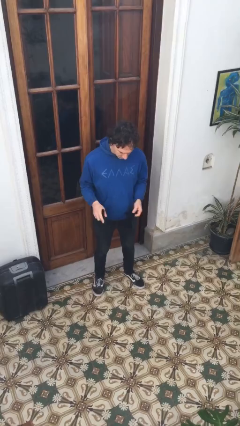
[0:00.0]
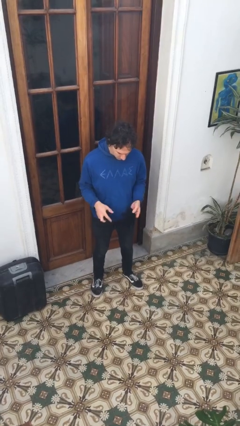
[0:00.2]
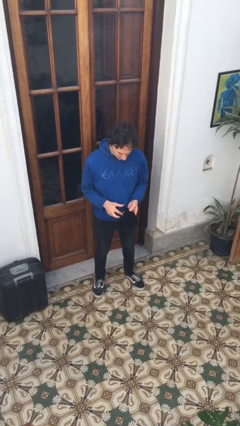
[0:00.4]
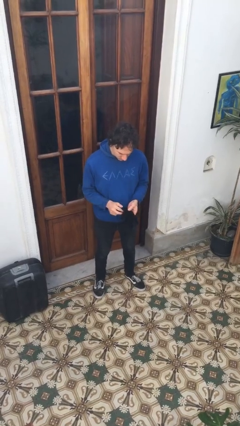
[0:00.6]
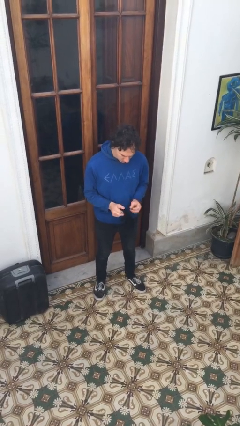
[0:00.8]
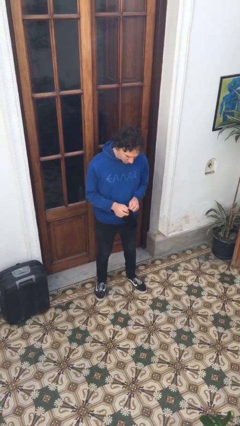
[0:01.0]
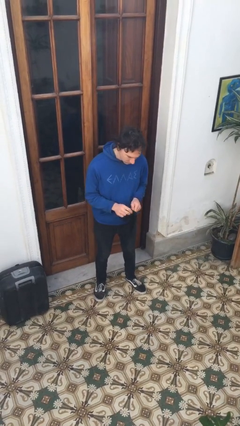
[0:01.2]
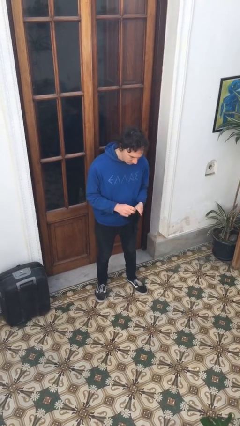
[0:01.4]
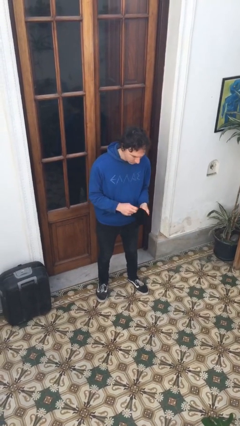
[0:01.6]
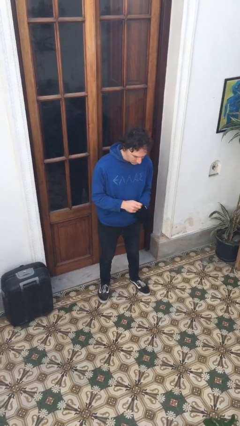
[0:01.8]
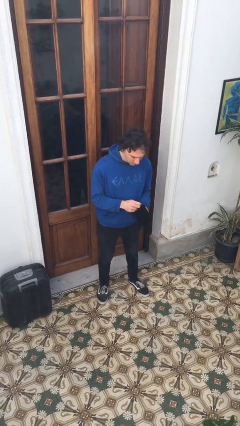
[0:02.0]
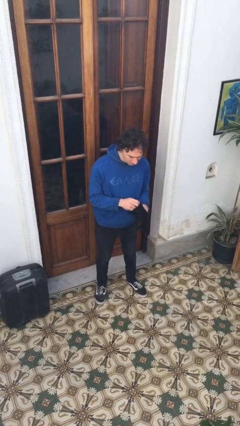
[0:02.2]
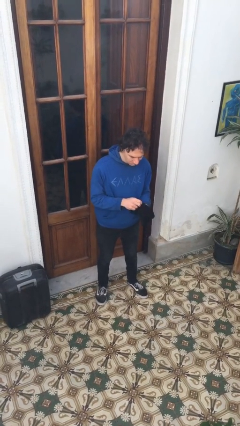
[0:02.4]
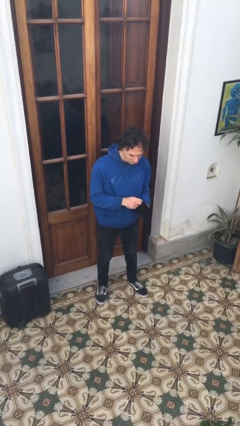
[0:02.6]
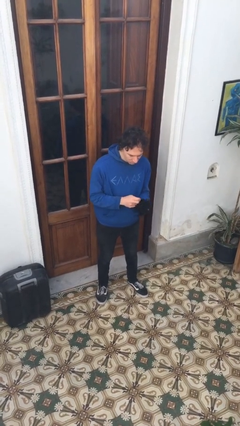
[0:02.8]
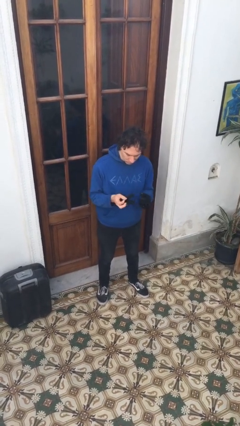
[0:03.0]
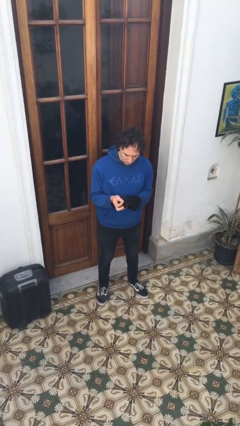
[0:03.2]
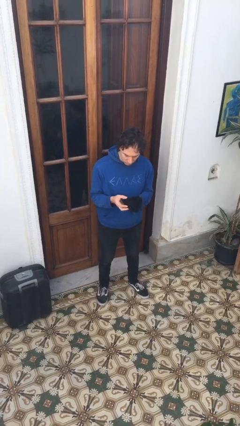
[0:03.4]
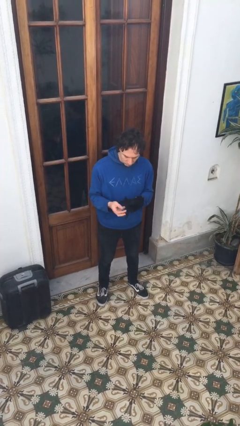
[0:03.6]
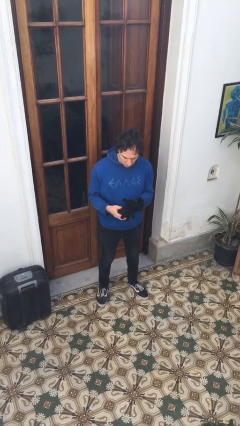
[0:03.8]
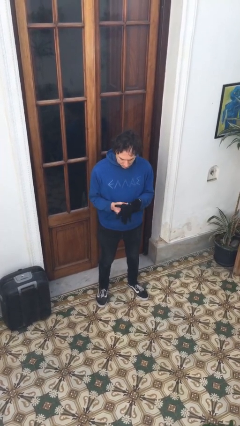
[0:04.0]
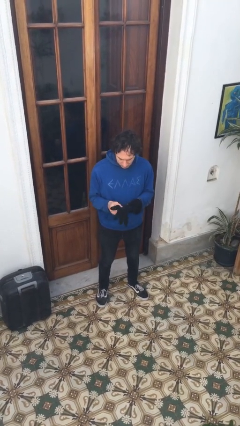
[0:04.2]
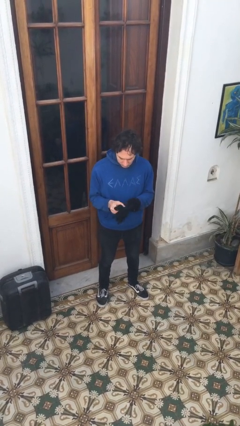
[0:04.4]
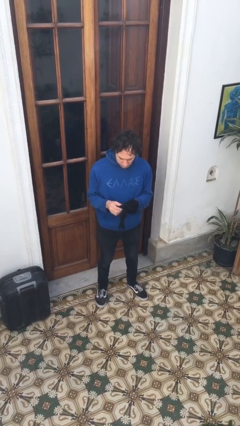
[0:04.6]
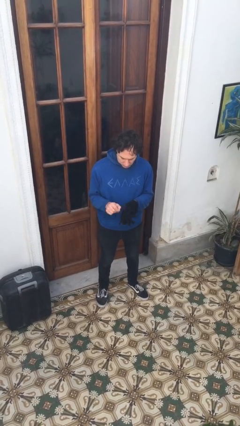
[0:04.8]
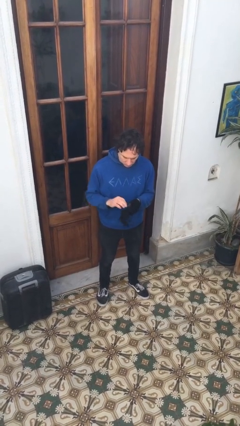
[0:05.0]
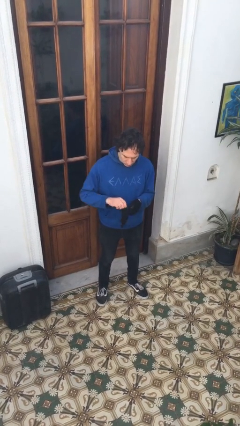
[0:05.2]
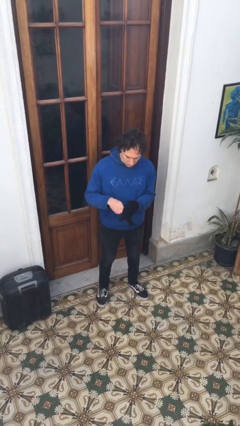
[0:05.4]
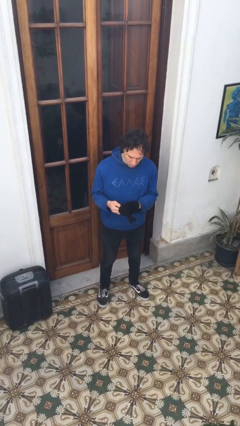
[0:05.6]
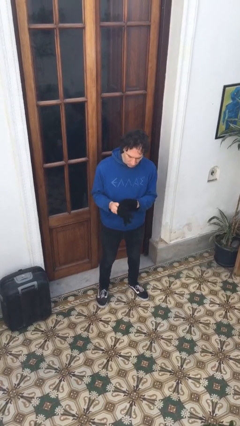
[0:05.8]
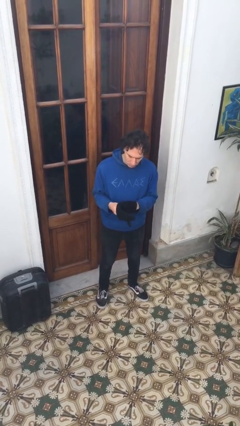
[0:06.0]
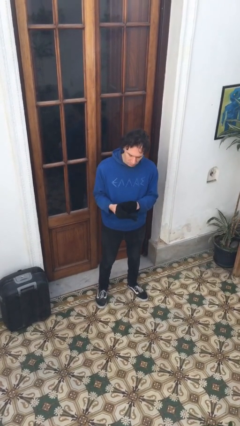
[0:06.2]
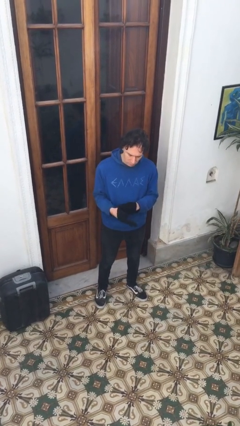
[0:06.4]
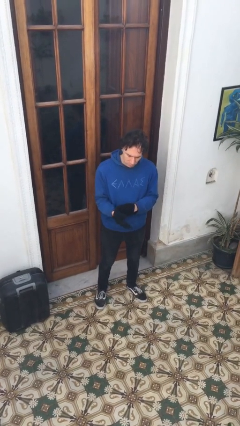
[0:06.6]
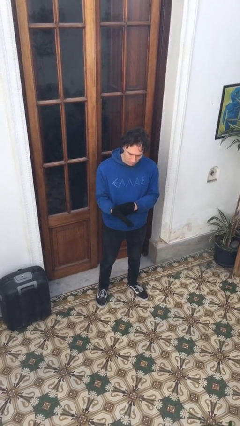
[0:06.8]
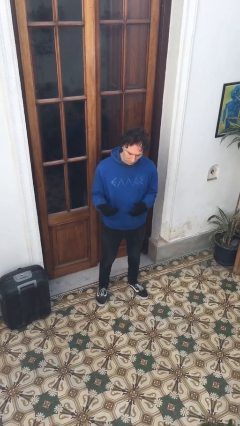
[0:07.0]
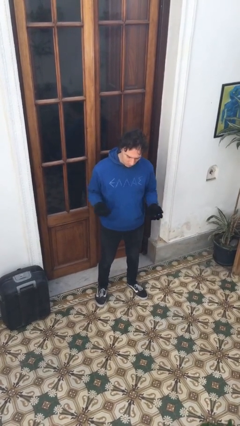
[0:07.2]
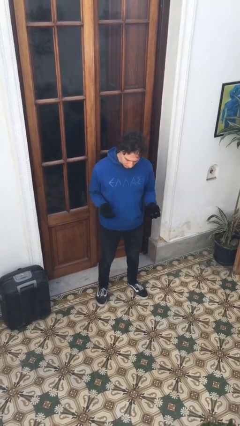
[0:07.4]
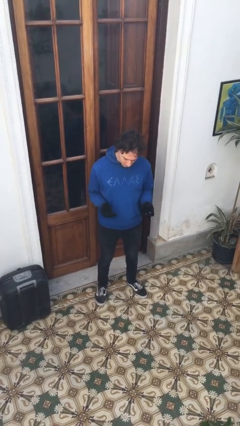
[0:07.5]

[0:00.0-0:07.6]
person puts on gloves

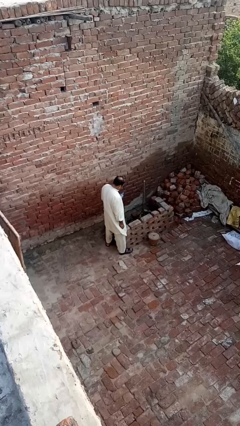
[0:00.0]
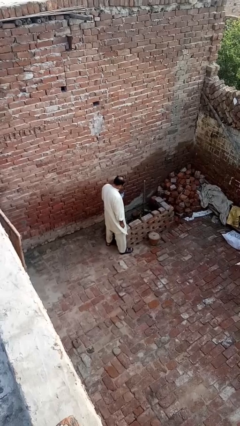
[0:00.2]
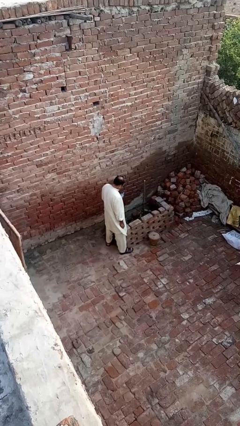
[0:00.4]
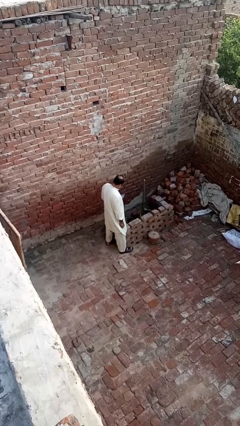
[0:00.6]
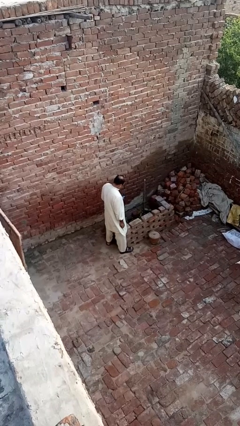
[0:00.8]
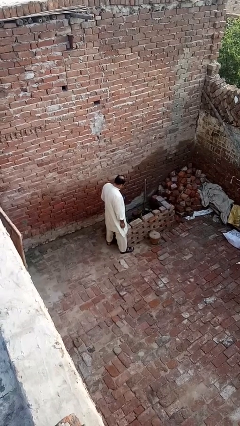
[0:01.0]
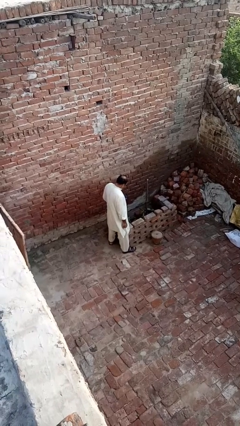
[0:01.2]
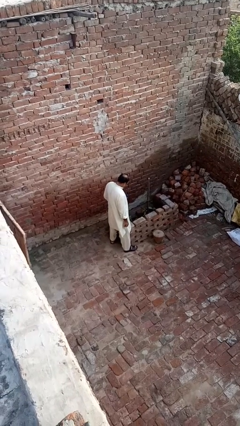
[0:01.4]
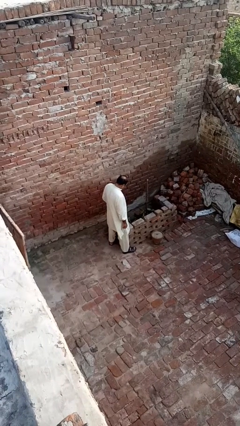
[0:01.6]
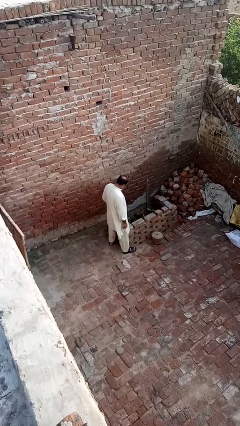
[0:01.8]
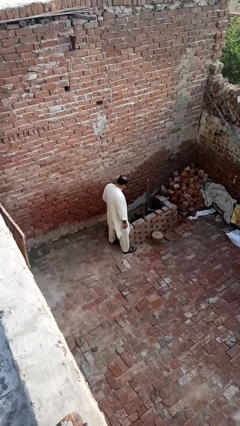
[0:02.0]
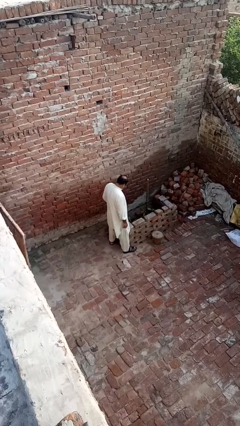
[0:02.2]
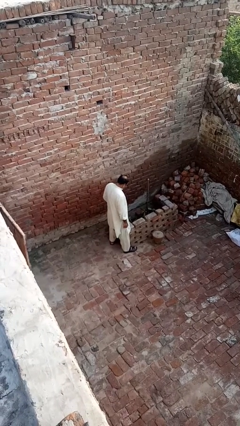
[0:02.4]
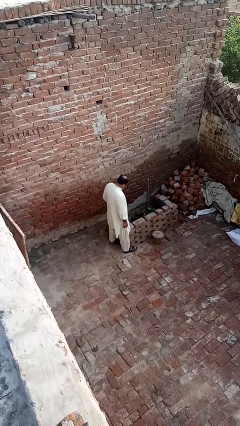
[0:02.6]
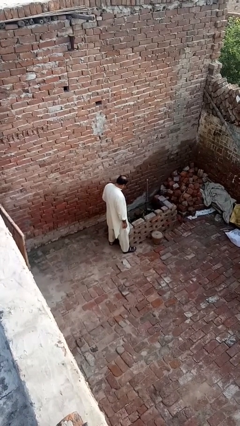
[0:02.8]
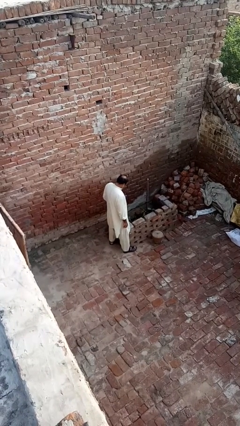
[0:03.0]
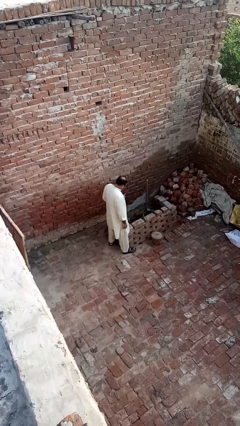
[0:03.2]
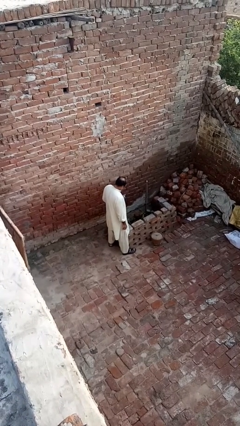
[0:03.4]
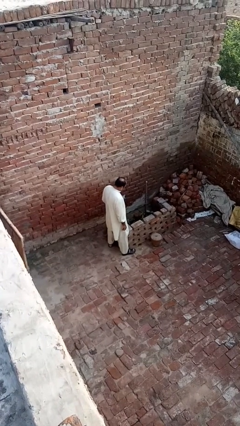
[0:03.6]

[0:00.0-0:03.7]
person waters houseplant

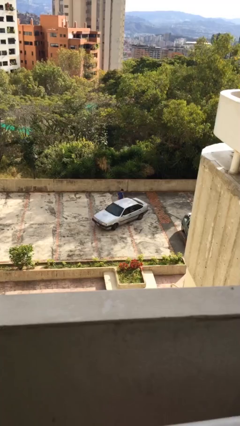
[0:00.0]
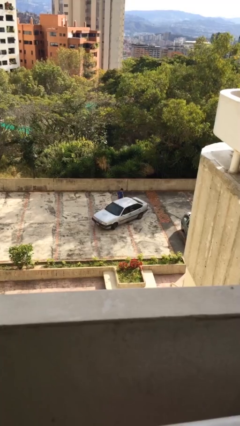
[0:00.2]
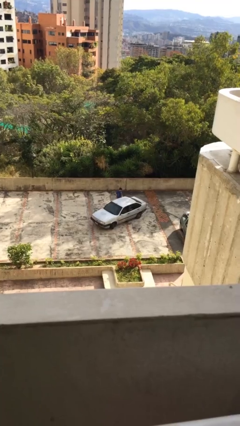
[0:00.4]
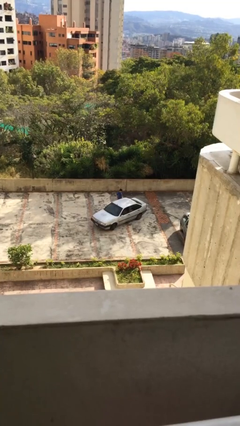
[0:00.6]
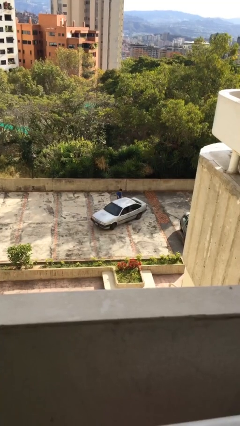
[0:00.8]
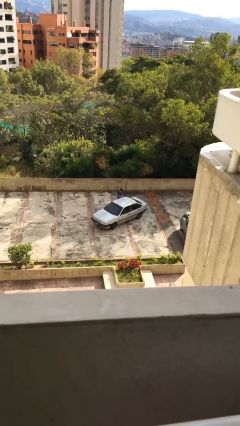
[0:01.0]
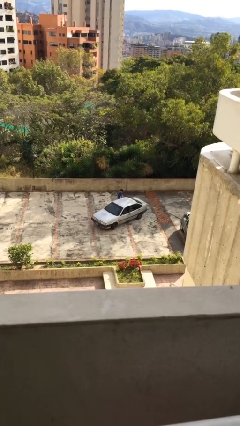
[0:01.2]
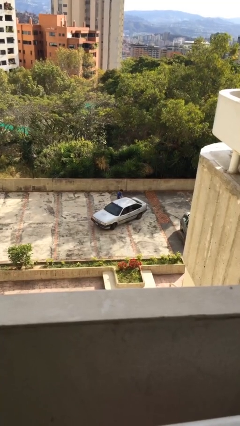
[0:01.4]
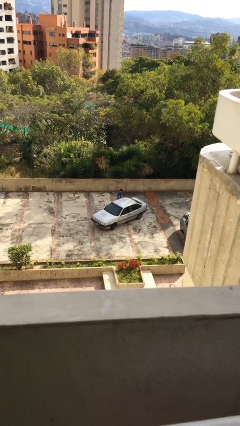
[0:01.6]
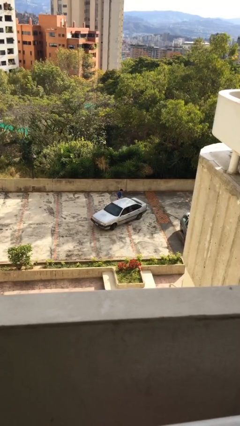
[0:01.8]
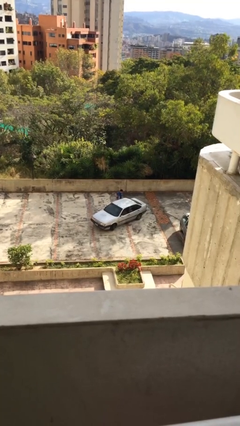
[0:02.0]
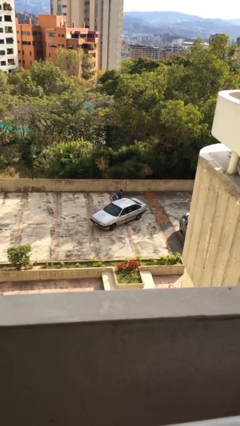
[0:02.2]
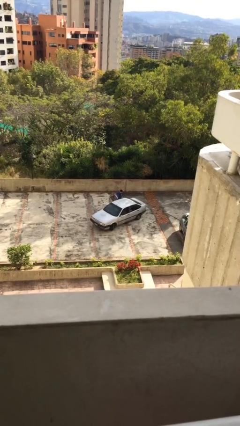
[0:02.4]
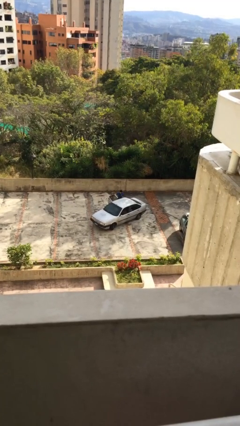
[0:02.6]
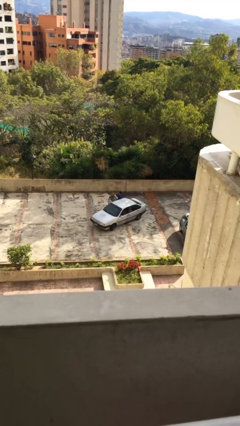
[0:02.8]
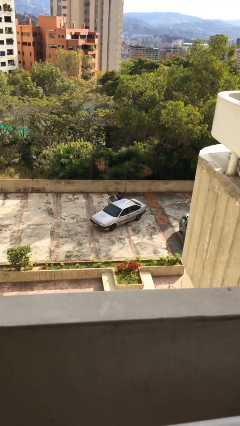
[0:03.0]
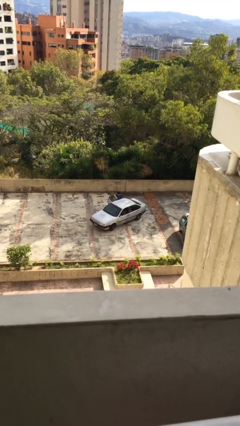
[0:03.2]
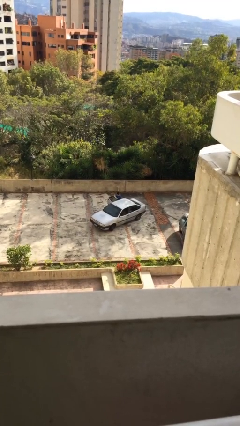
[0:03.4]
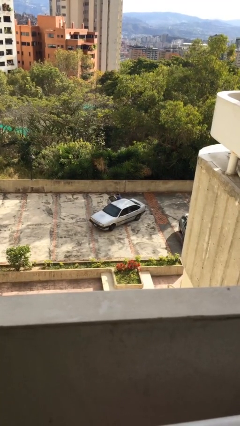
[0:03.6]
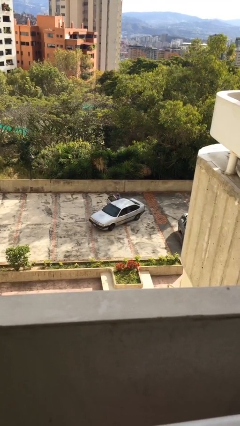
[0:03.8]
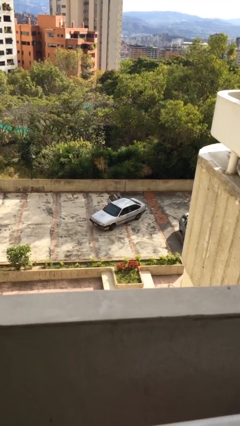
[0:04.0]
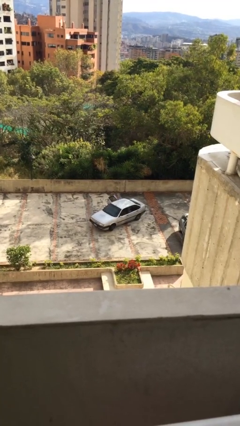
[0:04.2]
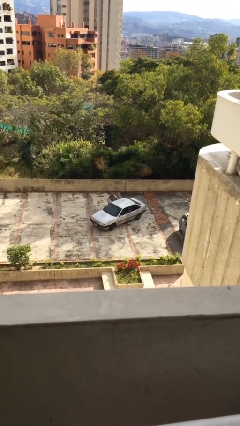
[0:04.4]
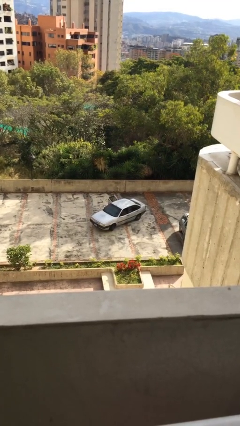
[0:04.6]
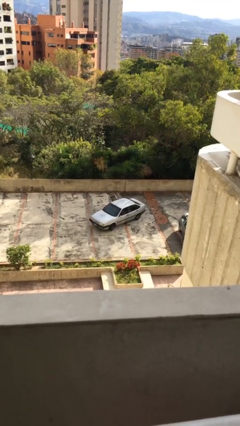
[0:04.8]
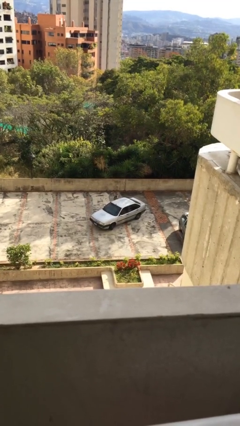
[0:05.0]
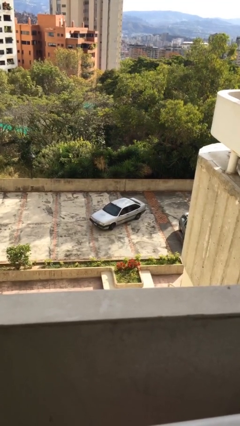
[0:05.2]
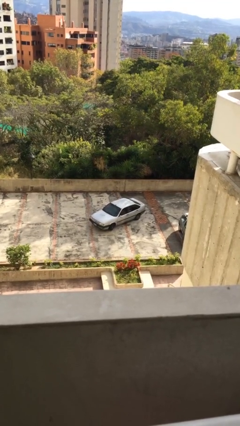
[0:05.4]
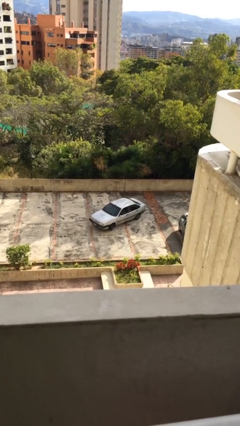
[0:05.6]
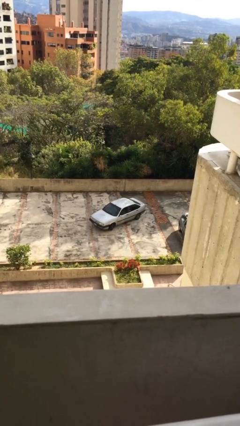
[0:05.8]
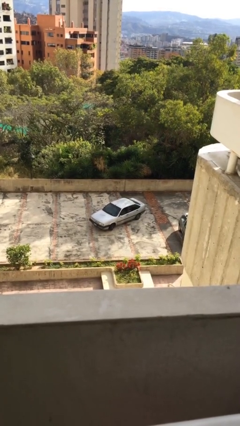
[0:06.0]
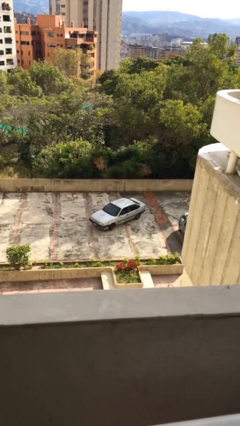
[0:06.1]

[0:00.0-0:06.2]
car picks up person

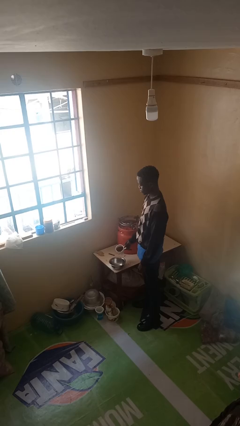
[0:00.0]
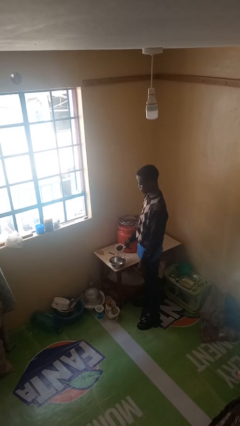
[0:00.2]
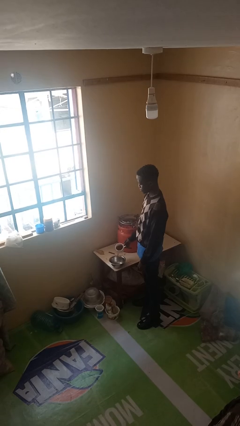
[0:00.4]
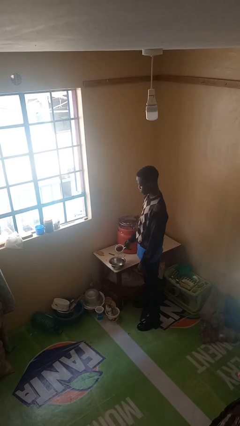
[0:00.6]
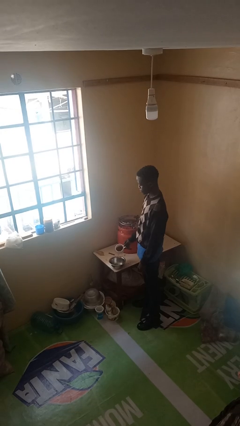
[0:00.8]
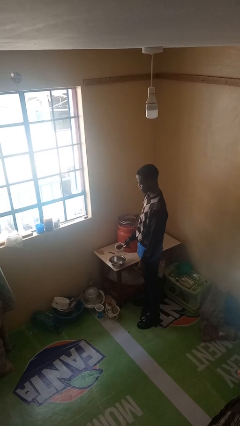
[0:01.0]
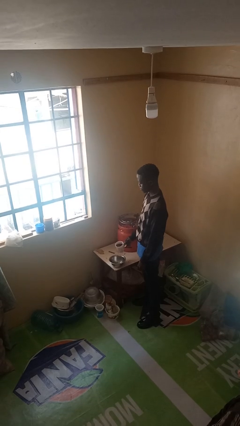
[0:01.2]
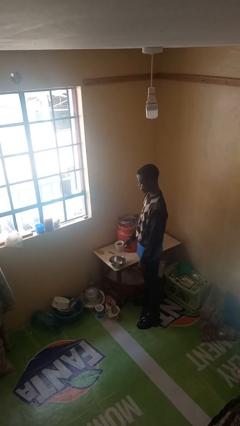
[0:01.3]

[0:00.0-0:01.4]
person pours into bowl
